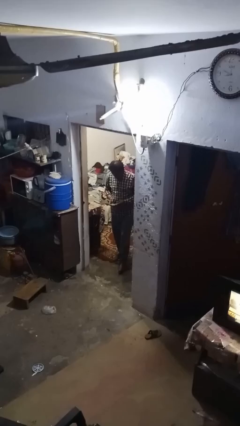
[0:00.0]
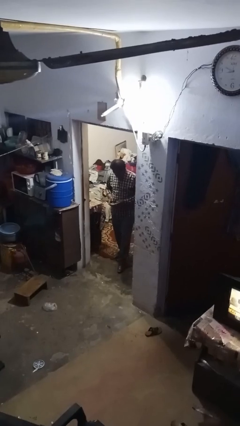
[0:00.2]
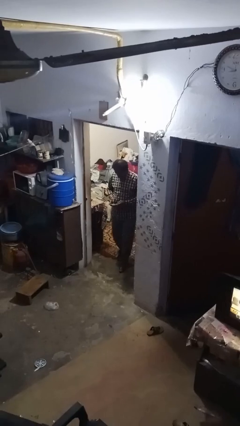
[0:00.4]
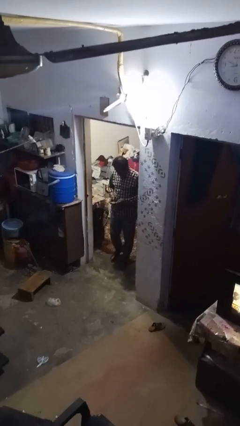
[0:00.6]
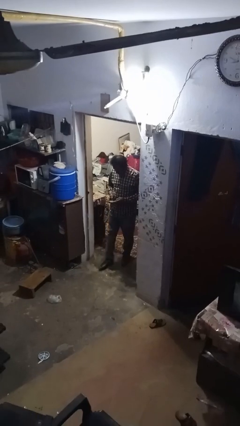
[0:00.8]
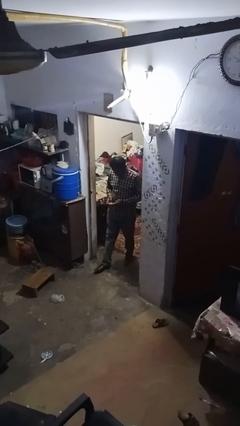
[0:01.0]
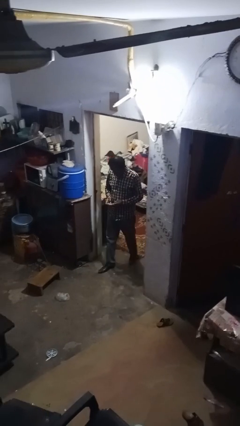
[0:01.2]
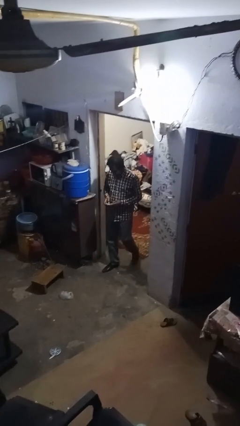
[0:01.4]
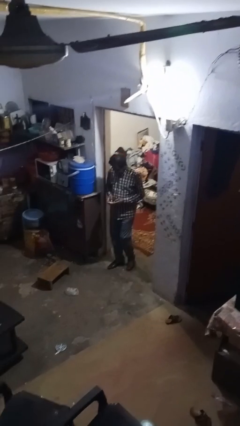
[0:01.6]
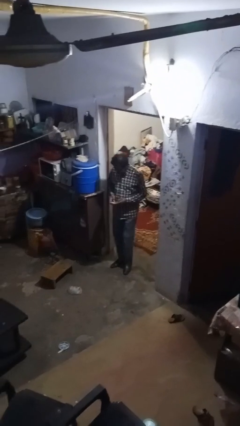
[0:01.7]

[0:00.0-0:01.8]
person enters scene through structure

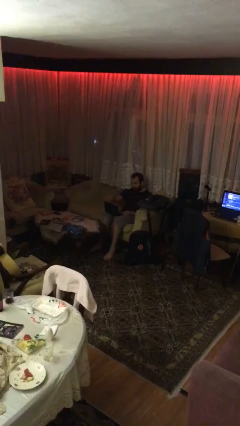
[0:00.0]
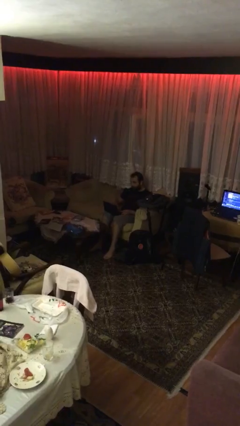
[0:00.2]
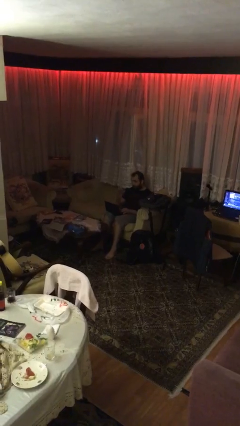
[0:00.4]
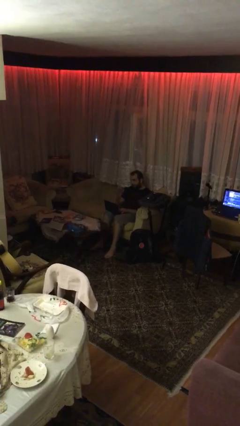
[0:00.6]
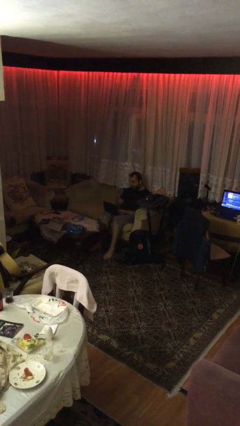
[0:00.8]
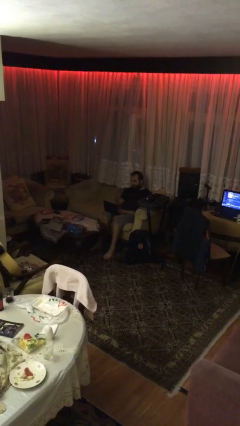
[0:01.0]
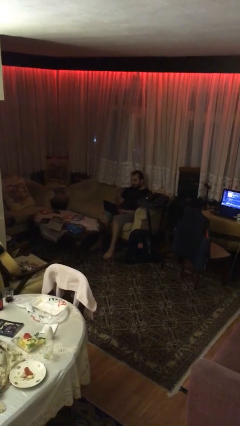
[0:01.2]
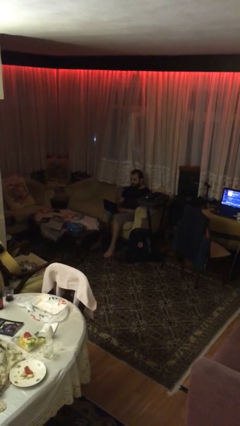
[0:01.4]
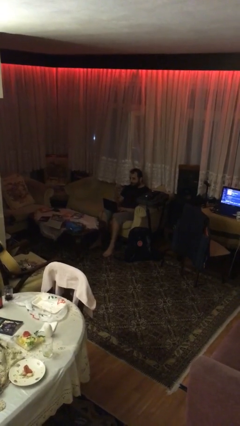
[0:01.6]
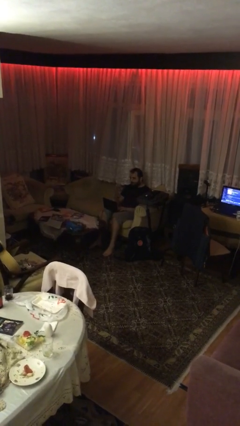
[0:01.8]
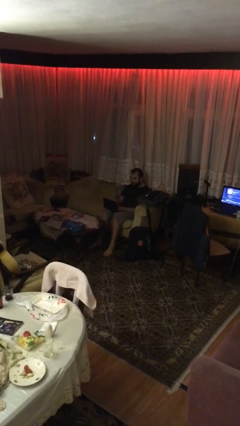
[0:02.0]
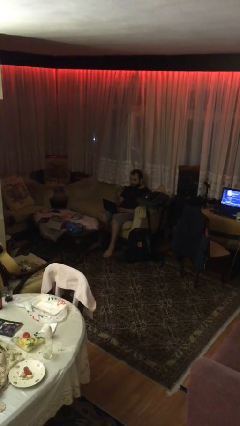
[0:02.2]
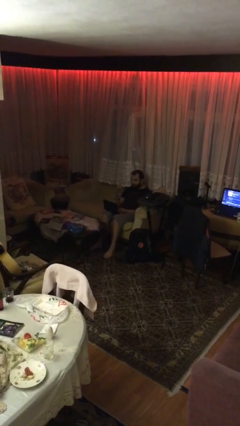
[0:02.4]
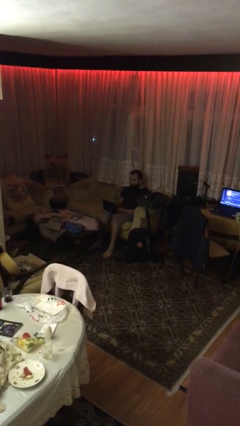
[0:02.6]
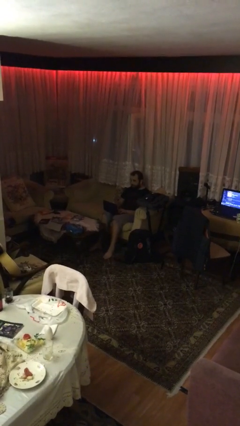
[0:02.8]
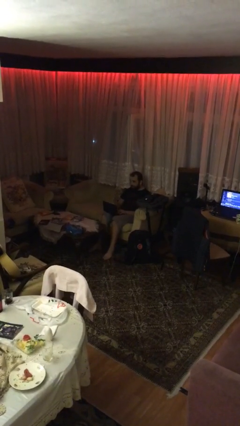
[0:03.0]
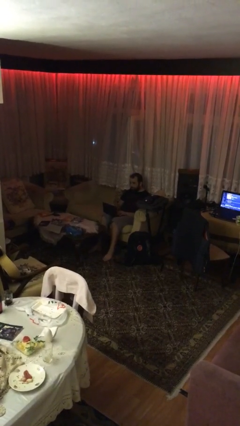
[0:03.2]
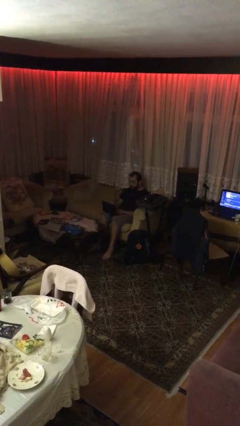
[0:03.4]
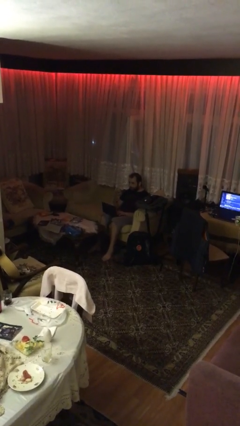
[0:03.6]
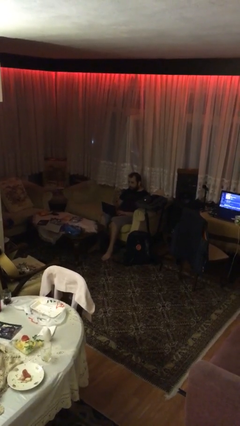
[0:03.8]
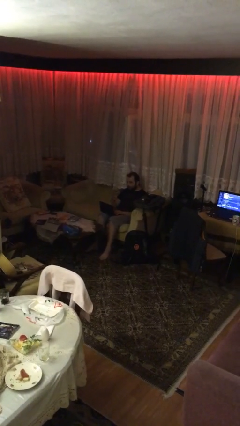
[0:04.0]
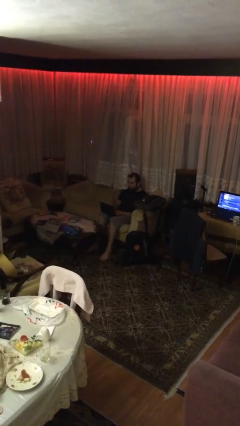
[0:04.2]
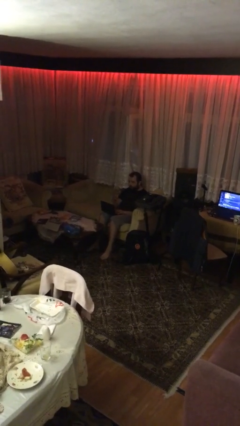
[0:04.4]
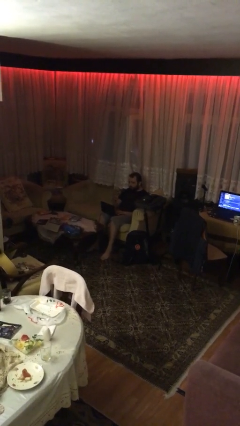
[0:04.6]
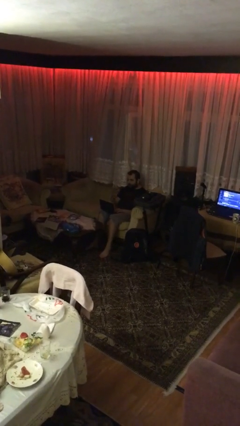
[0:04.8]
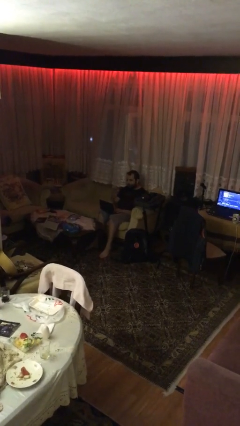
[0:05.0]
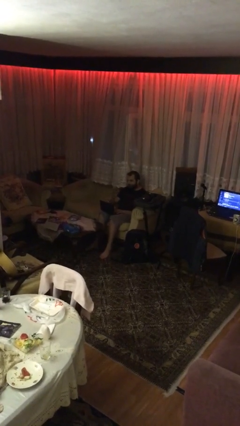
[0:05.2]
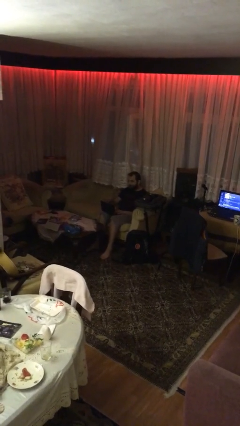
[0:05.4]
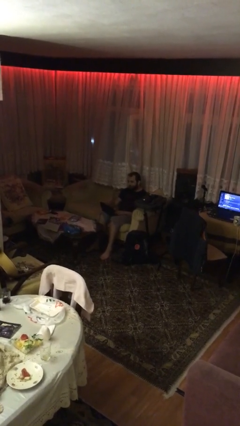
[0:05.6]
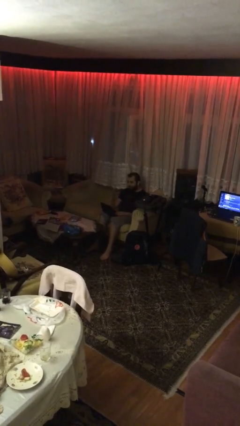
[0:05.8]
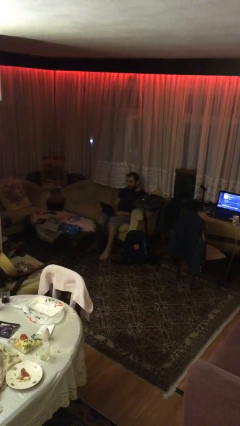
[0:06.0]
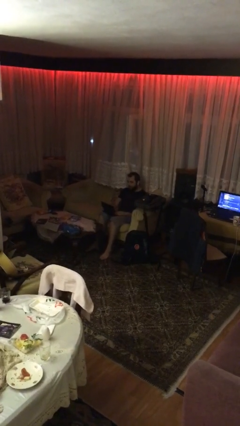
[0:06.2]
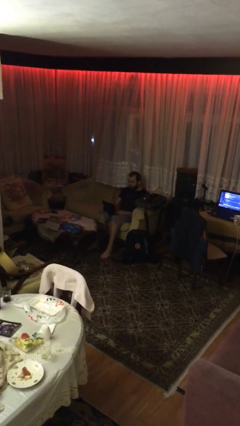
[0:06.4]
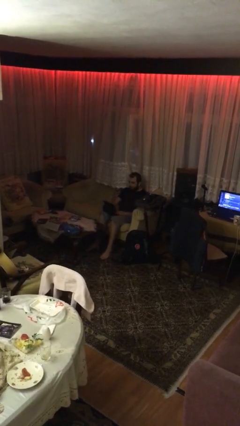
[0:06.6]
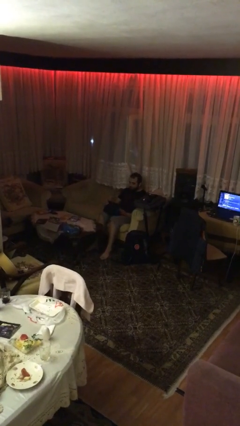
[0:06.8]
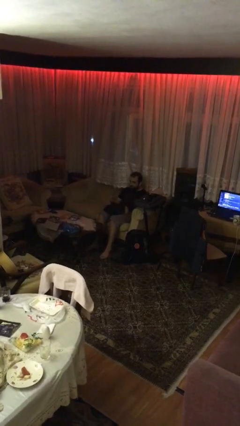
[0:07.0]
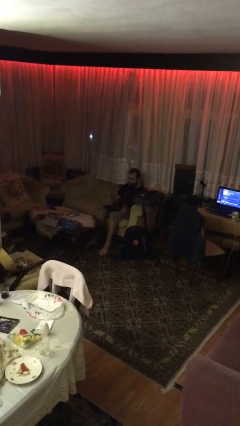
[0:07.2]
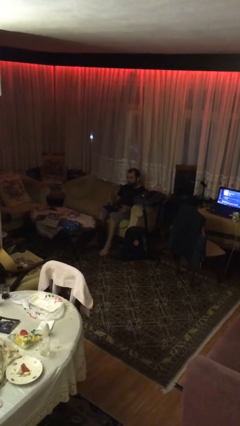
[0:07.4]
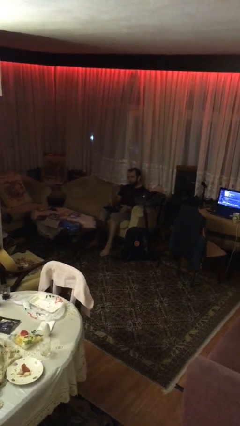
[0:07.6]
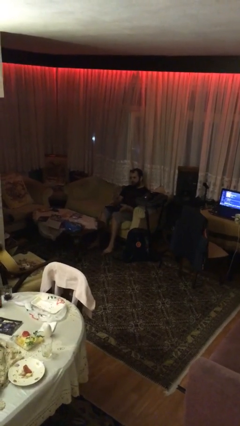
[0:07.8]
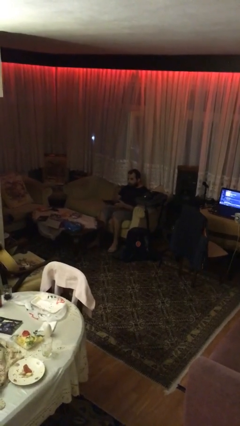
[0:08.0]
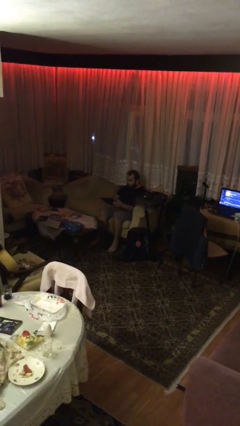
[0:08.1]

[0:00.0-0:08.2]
person interacts with laptop

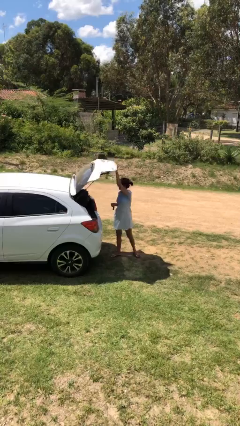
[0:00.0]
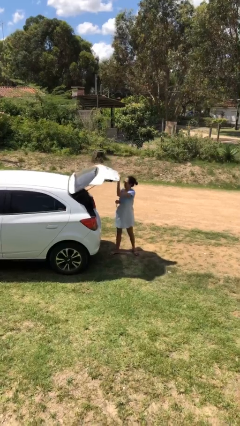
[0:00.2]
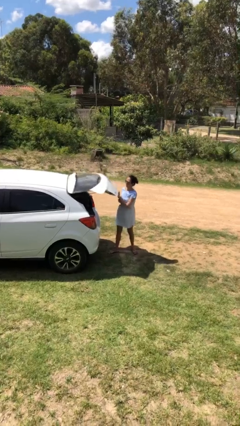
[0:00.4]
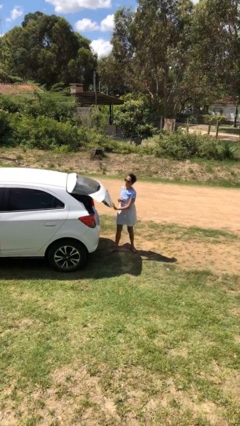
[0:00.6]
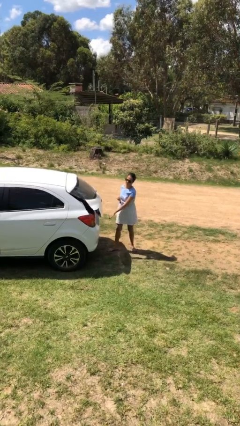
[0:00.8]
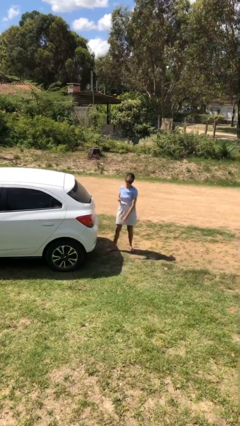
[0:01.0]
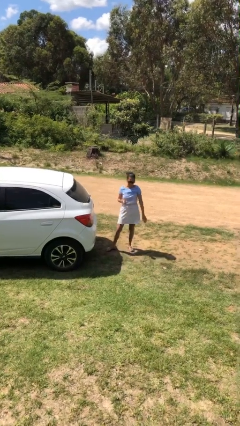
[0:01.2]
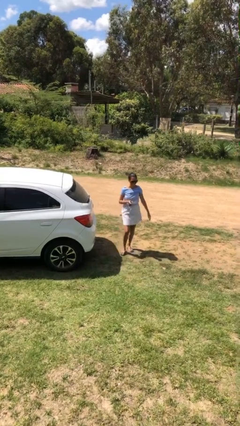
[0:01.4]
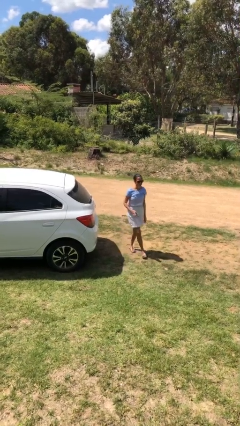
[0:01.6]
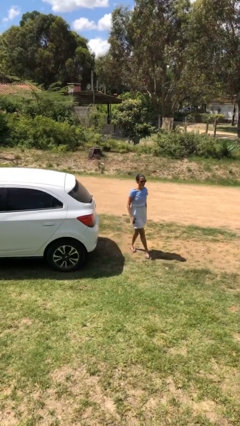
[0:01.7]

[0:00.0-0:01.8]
person closes car trunk

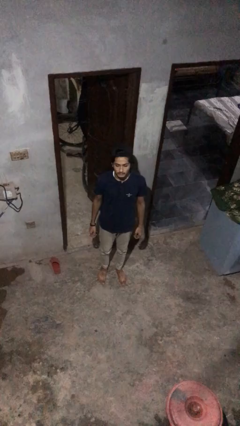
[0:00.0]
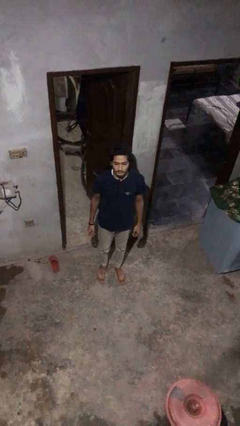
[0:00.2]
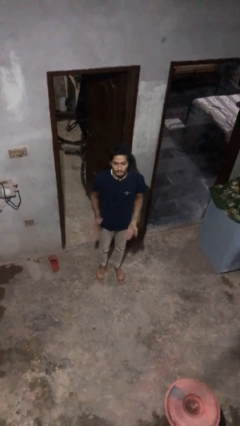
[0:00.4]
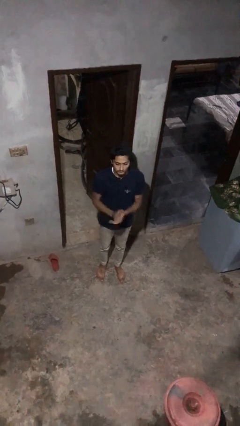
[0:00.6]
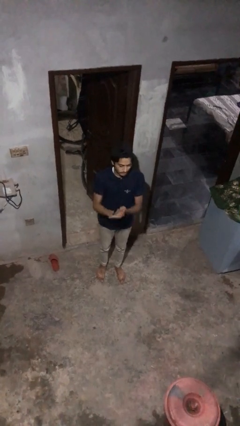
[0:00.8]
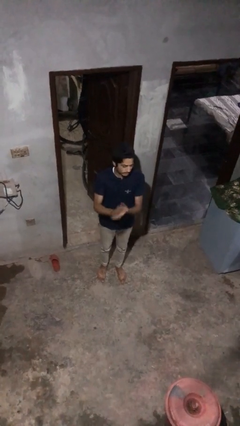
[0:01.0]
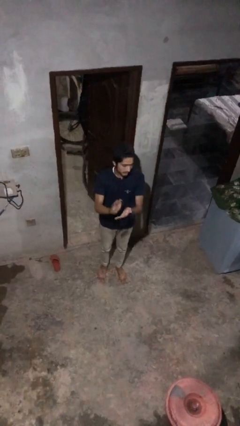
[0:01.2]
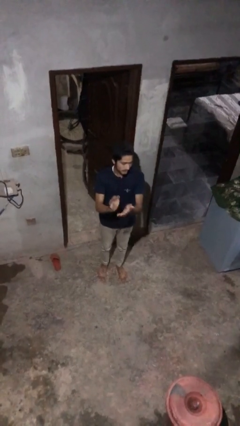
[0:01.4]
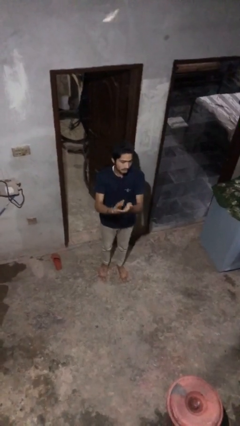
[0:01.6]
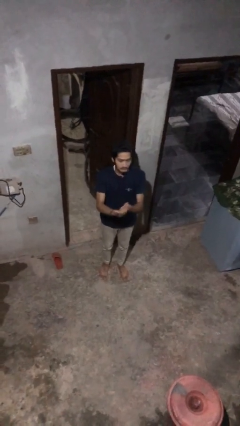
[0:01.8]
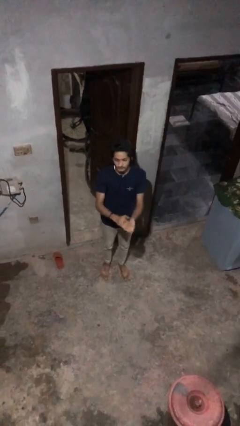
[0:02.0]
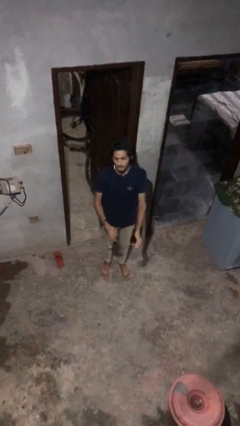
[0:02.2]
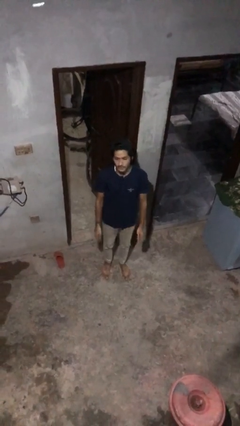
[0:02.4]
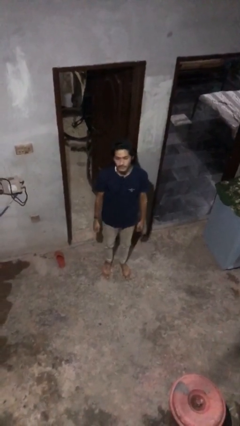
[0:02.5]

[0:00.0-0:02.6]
person claps hands

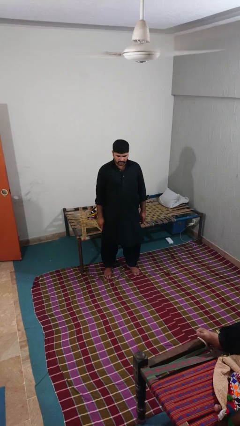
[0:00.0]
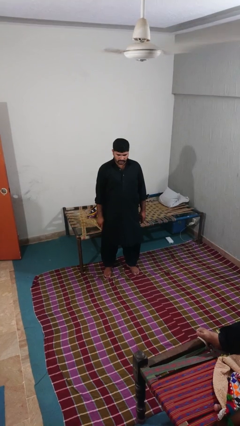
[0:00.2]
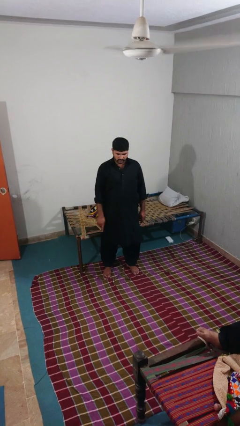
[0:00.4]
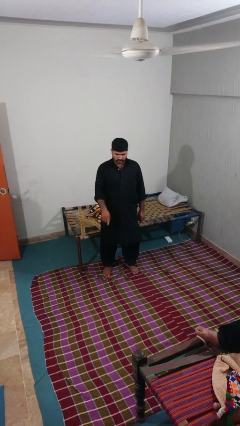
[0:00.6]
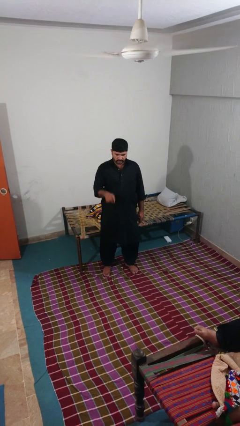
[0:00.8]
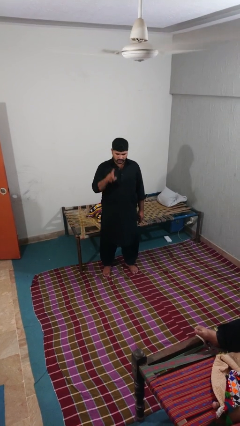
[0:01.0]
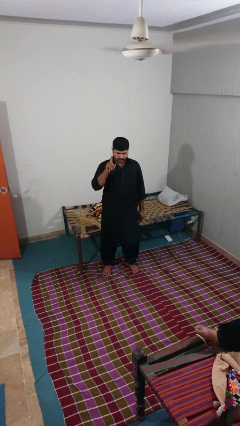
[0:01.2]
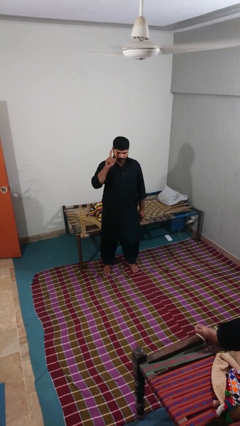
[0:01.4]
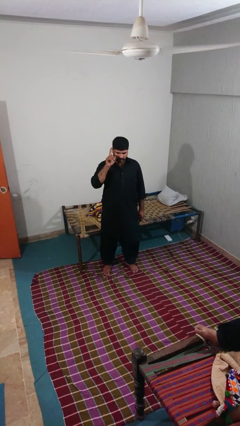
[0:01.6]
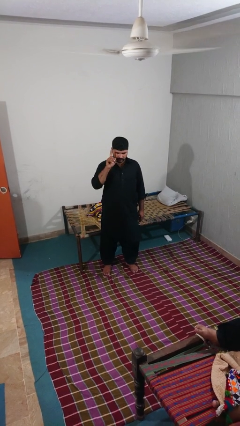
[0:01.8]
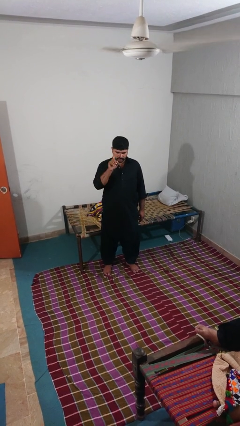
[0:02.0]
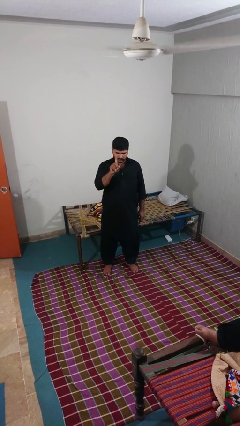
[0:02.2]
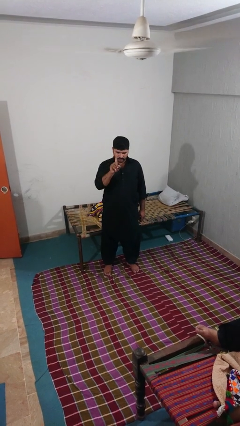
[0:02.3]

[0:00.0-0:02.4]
person gestures swipe up

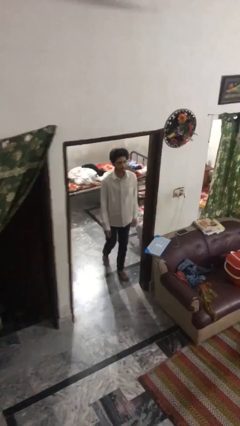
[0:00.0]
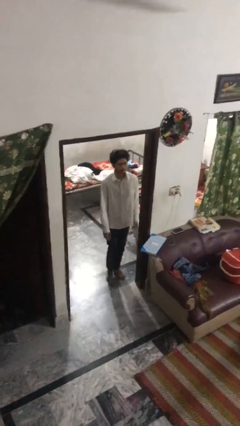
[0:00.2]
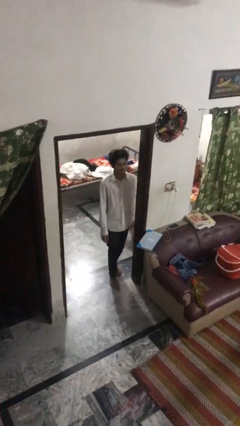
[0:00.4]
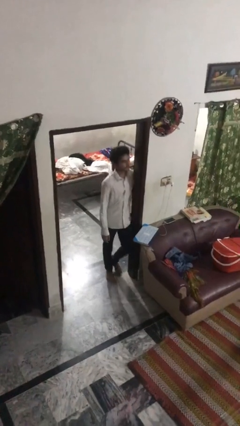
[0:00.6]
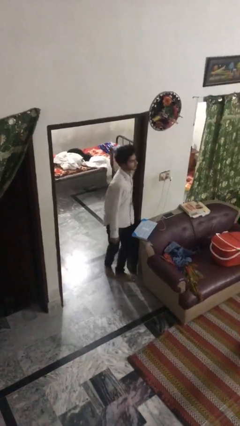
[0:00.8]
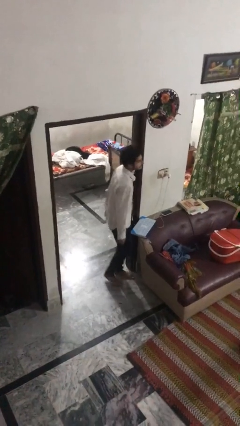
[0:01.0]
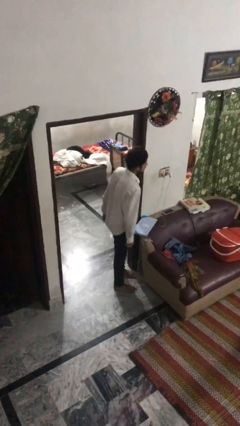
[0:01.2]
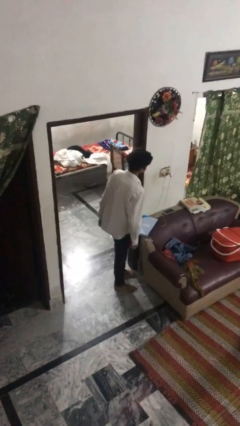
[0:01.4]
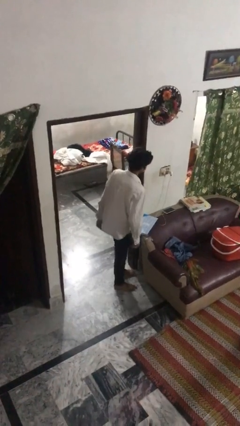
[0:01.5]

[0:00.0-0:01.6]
person bumps into wall
